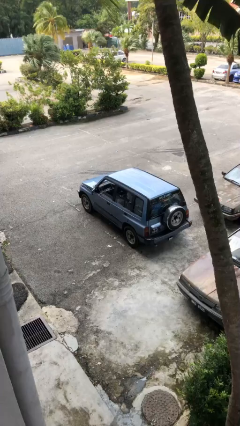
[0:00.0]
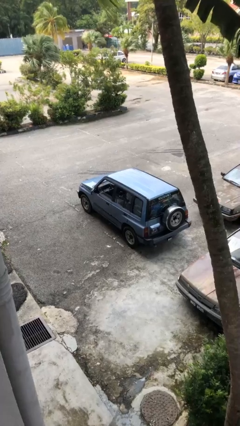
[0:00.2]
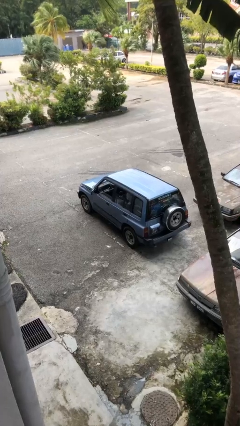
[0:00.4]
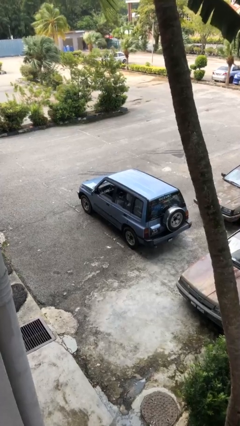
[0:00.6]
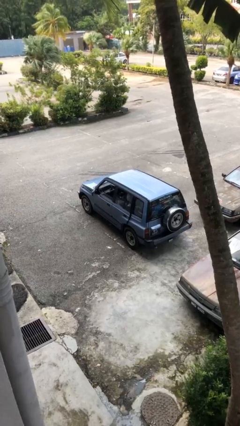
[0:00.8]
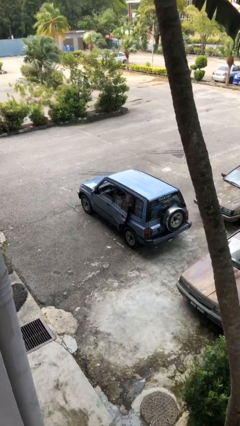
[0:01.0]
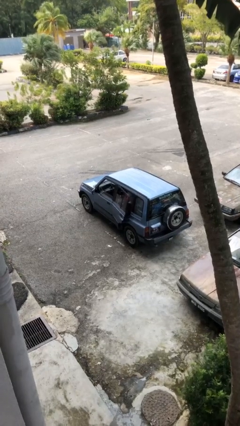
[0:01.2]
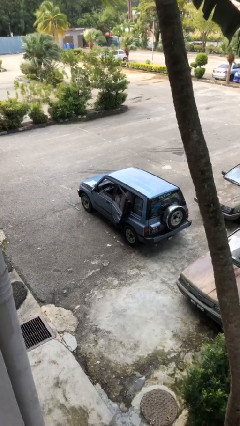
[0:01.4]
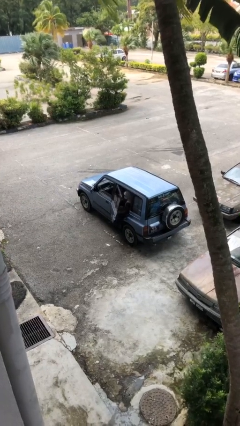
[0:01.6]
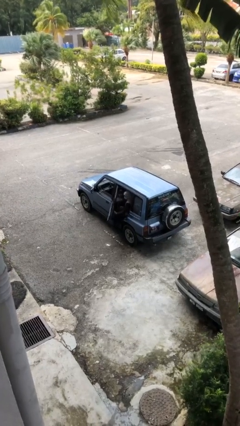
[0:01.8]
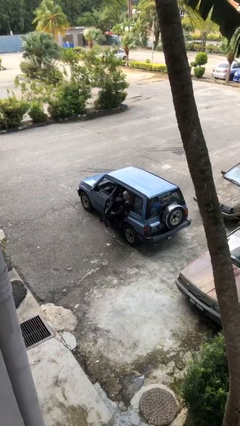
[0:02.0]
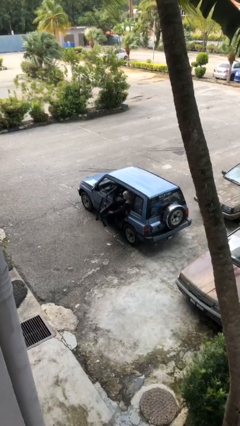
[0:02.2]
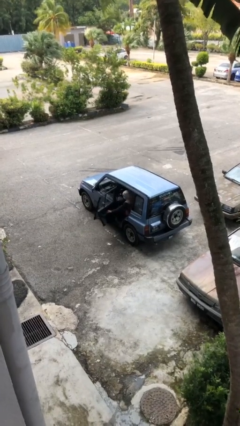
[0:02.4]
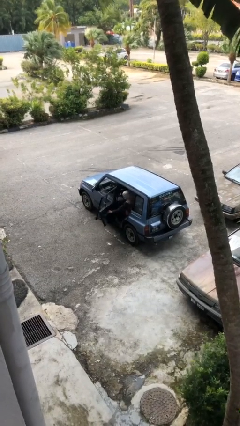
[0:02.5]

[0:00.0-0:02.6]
person opens car door

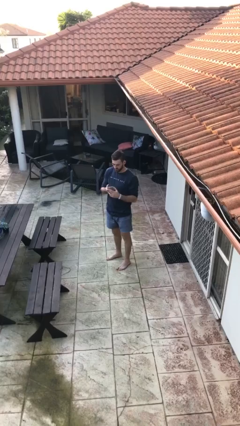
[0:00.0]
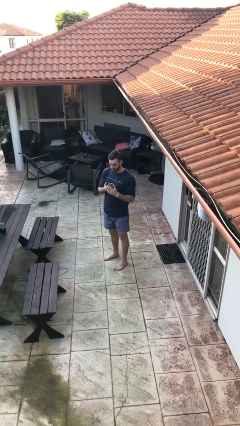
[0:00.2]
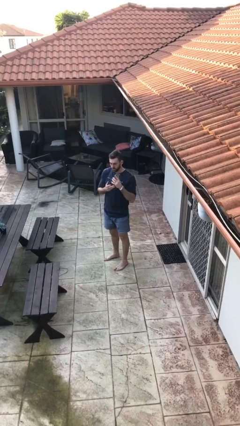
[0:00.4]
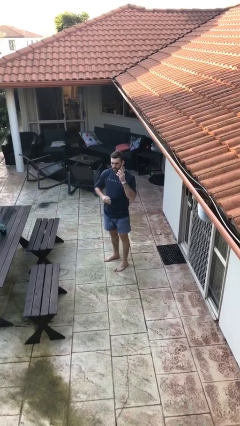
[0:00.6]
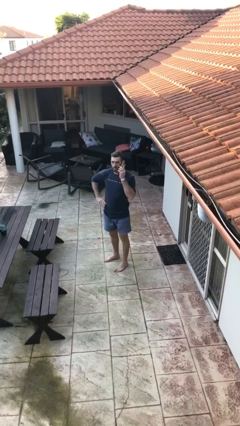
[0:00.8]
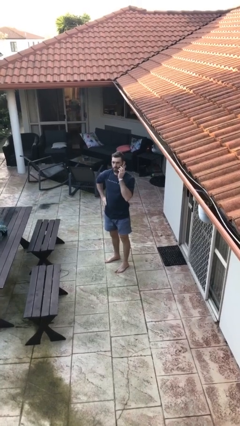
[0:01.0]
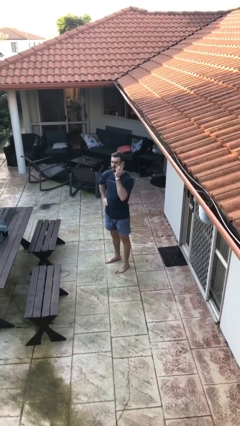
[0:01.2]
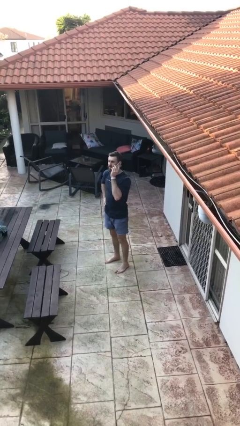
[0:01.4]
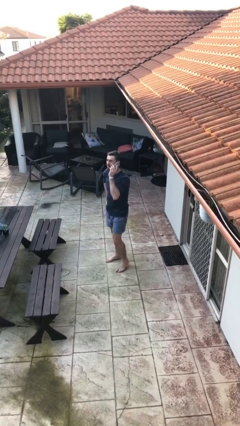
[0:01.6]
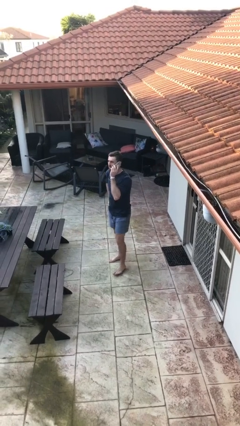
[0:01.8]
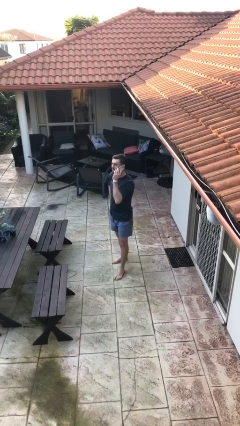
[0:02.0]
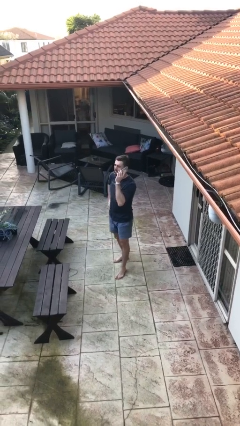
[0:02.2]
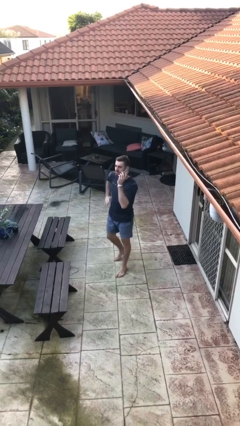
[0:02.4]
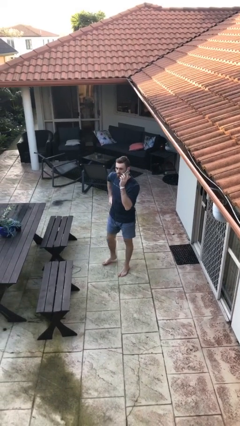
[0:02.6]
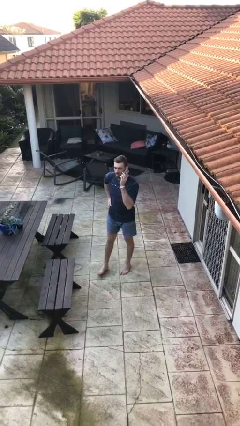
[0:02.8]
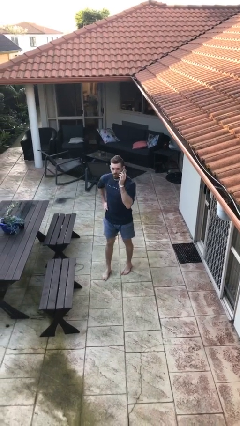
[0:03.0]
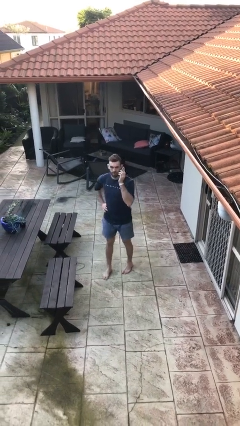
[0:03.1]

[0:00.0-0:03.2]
person talks on phone

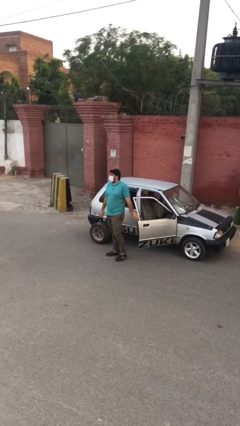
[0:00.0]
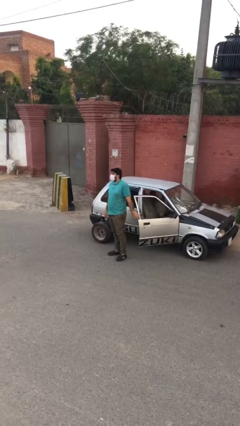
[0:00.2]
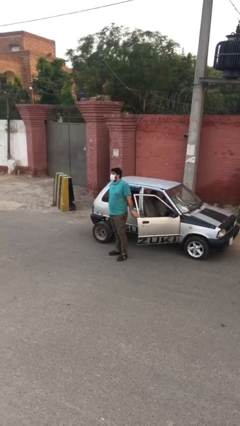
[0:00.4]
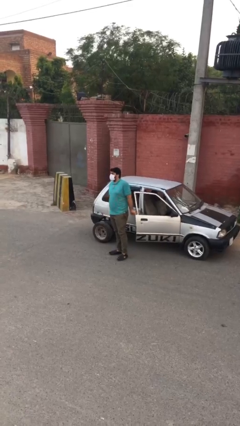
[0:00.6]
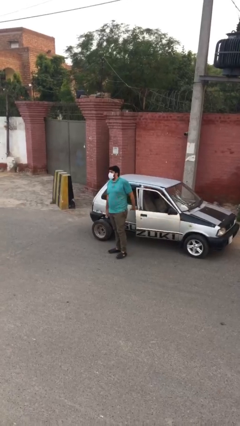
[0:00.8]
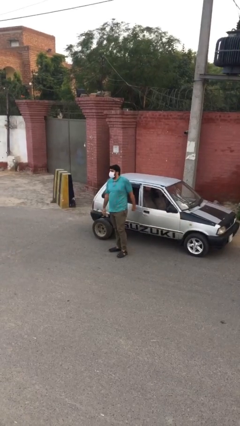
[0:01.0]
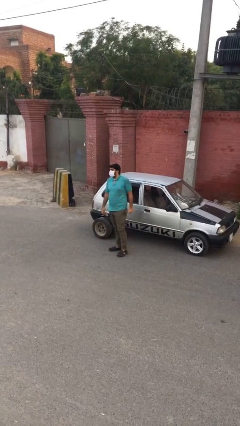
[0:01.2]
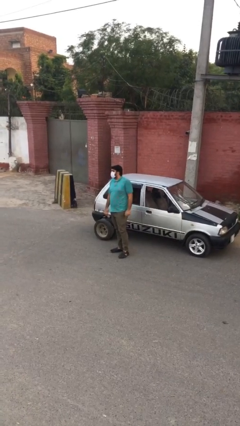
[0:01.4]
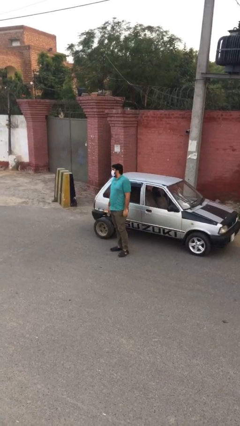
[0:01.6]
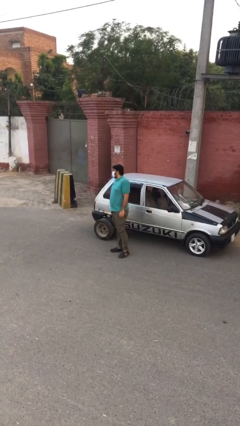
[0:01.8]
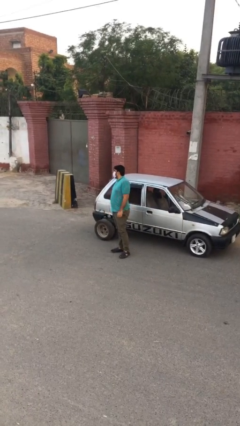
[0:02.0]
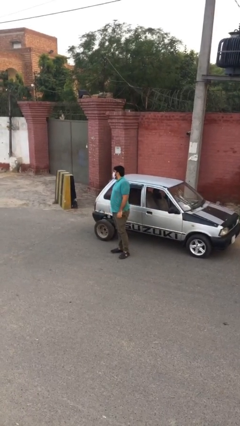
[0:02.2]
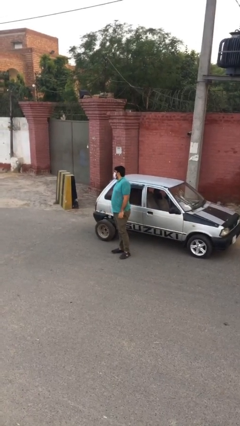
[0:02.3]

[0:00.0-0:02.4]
person closes car door

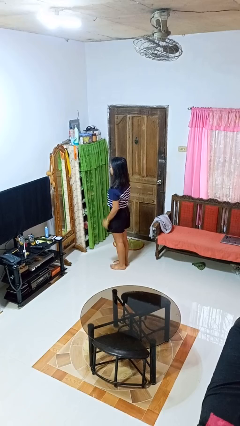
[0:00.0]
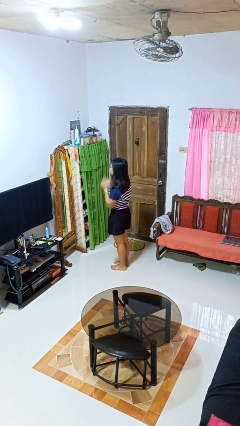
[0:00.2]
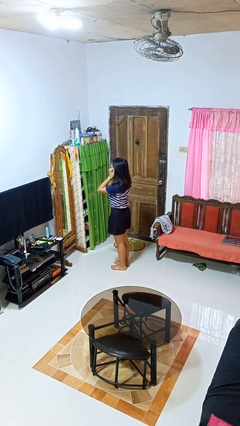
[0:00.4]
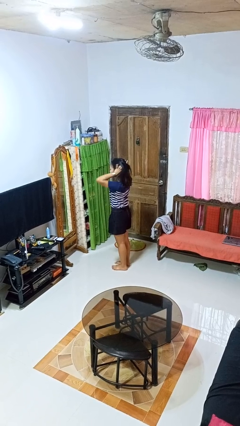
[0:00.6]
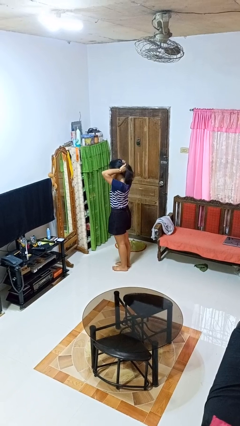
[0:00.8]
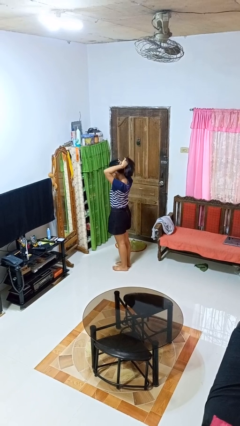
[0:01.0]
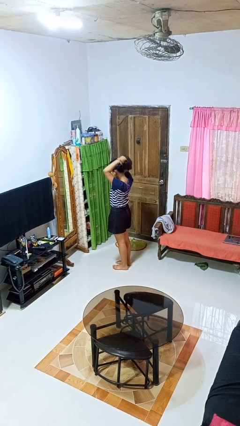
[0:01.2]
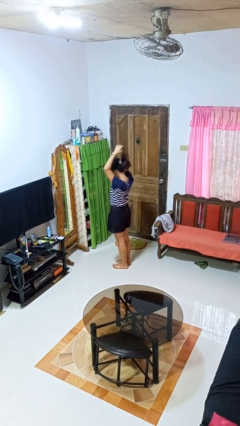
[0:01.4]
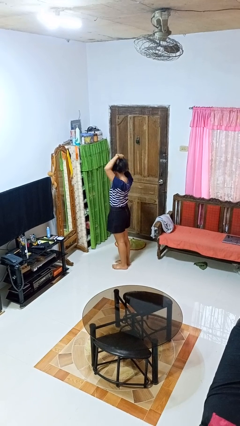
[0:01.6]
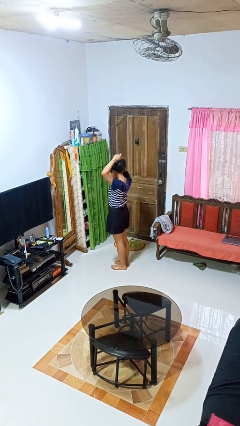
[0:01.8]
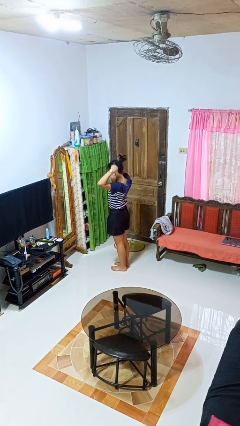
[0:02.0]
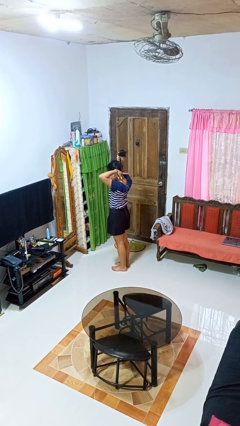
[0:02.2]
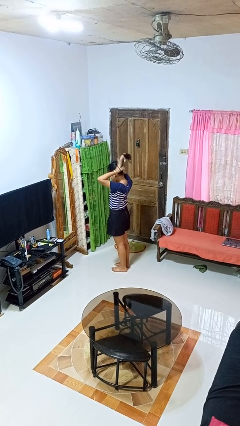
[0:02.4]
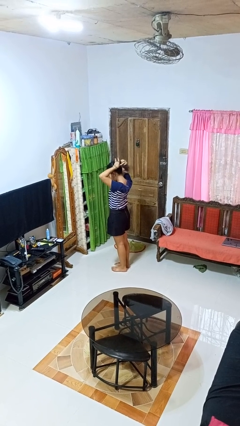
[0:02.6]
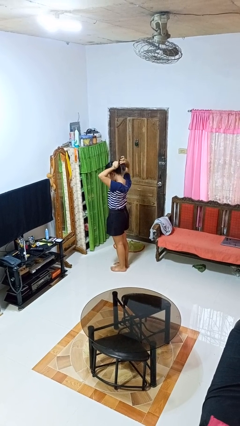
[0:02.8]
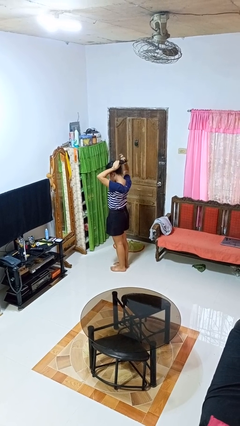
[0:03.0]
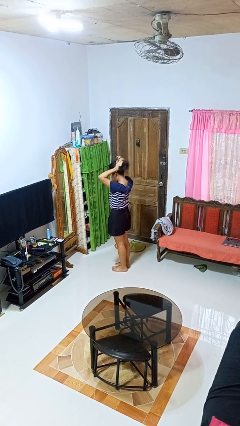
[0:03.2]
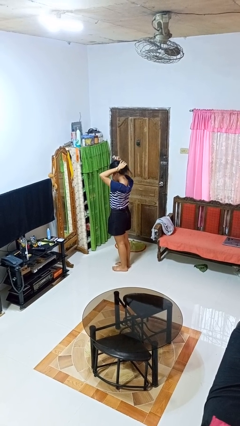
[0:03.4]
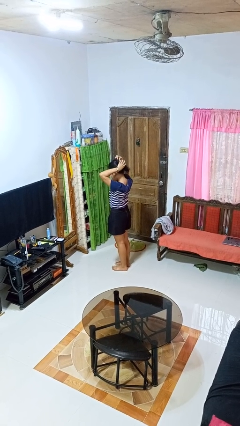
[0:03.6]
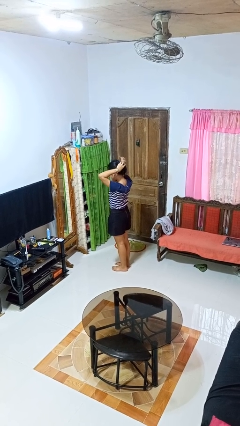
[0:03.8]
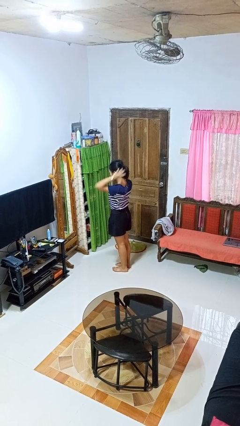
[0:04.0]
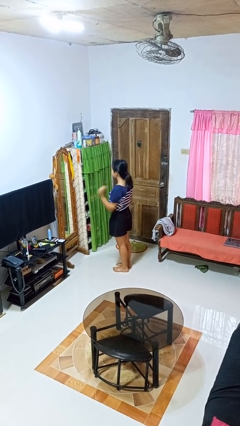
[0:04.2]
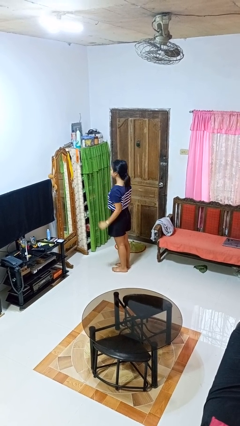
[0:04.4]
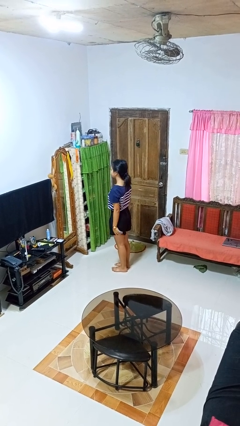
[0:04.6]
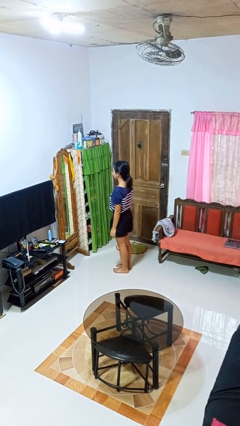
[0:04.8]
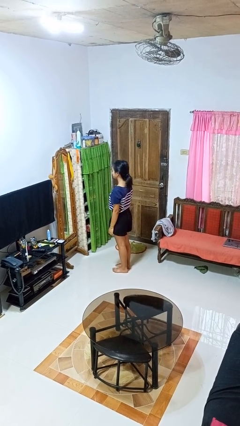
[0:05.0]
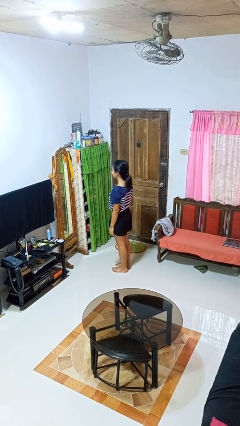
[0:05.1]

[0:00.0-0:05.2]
person puts hair in ponytail

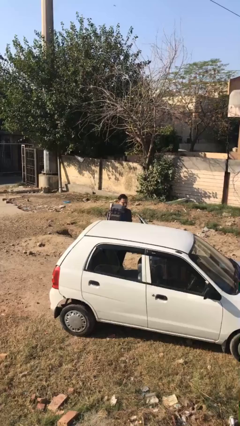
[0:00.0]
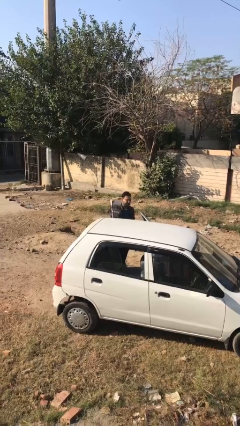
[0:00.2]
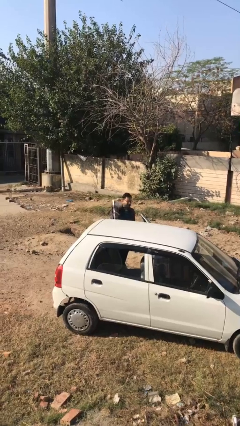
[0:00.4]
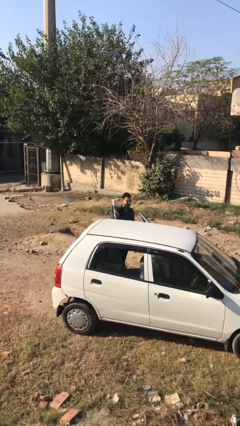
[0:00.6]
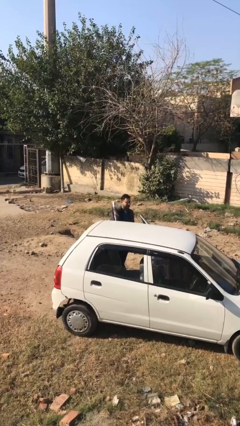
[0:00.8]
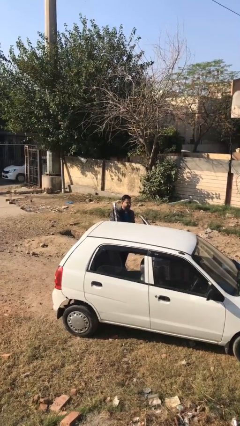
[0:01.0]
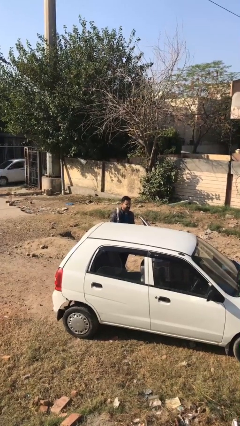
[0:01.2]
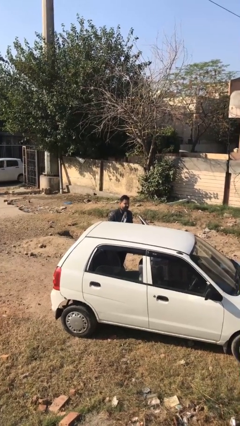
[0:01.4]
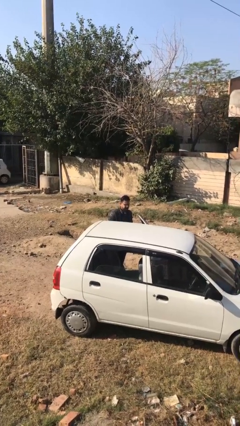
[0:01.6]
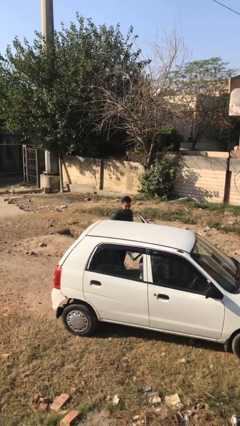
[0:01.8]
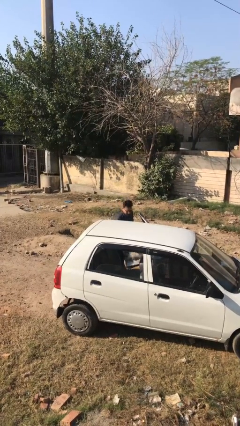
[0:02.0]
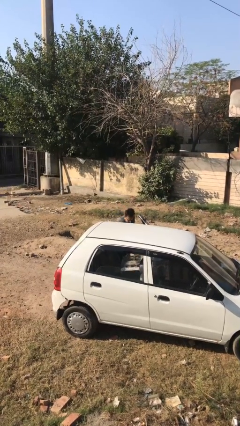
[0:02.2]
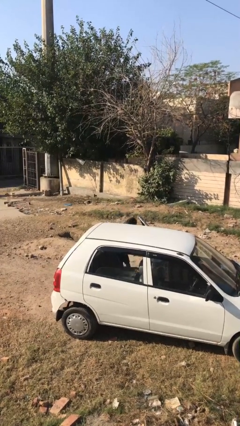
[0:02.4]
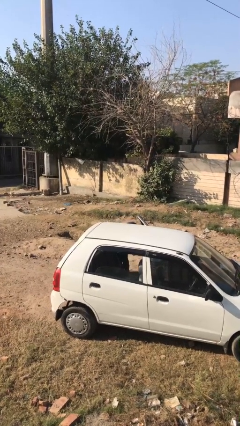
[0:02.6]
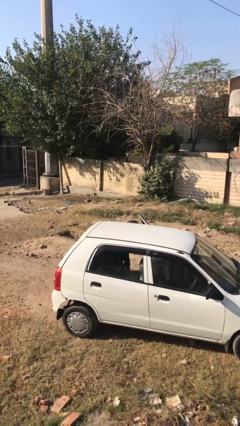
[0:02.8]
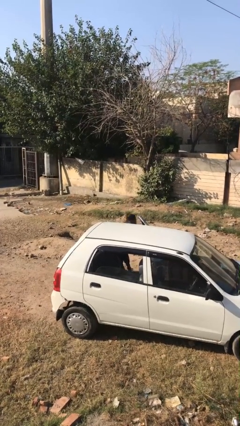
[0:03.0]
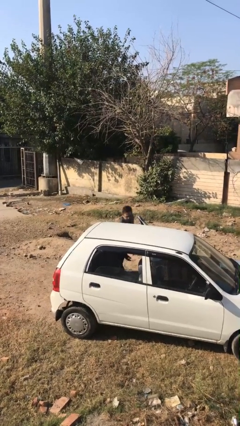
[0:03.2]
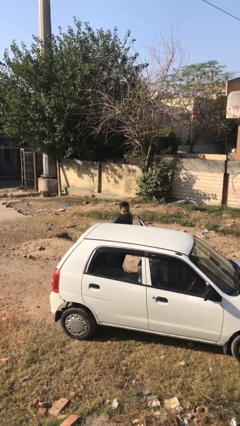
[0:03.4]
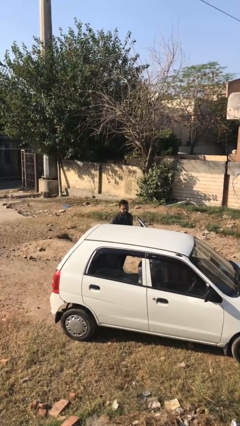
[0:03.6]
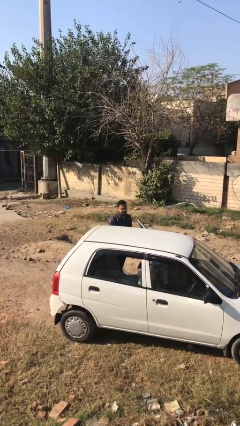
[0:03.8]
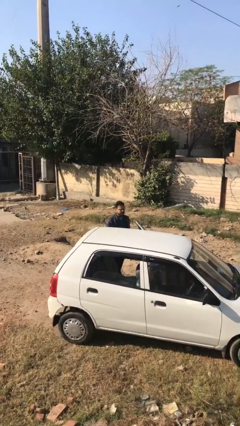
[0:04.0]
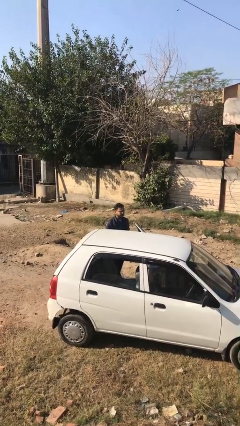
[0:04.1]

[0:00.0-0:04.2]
person loads car
